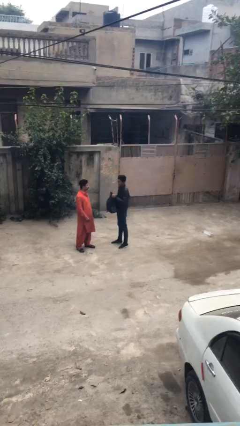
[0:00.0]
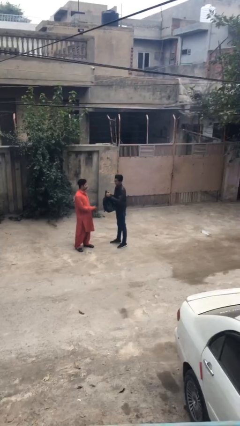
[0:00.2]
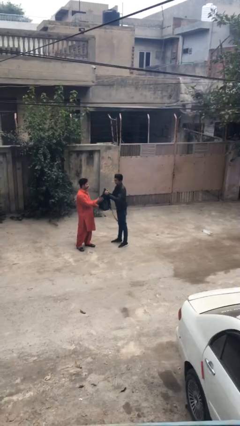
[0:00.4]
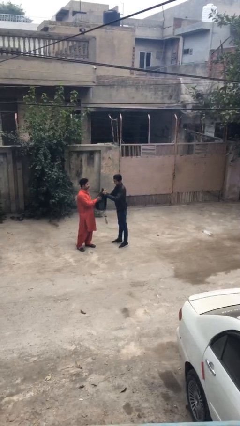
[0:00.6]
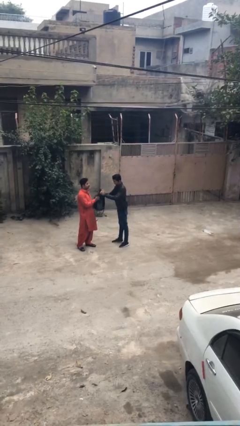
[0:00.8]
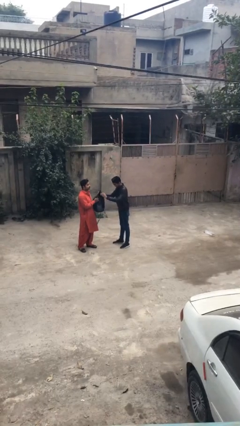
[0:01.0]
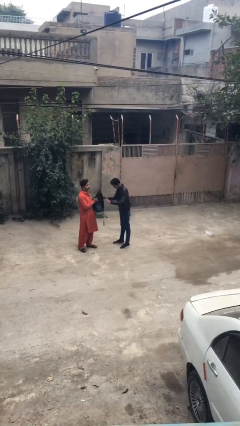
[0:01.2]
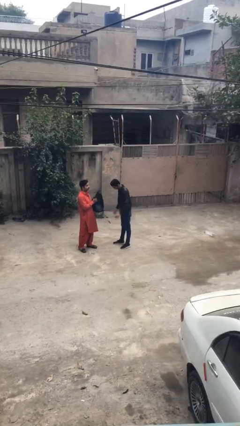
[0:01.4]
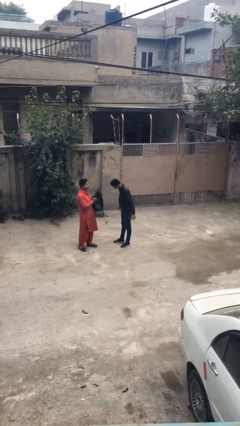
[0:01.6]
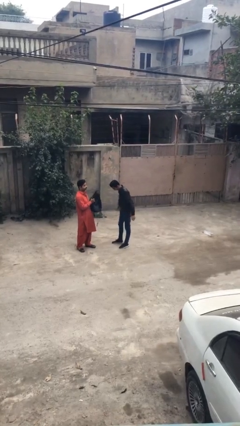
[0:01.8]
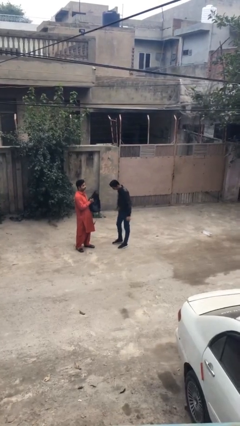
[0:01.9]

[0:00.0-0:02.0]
person transfers object to person

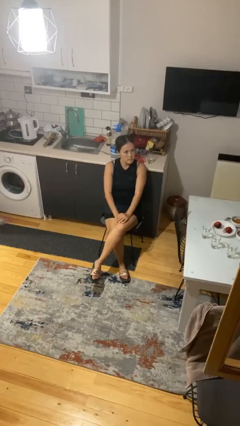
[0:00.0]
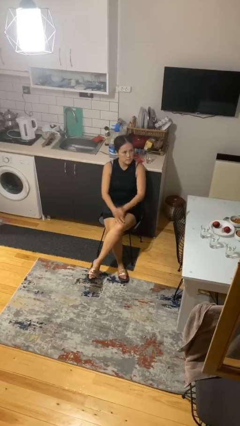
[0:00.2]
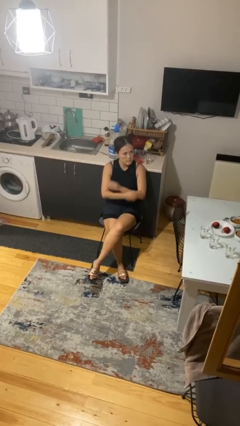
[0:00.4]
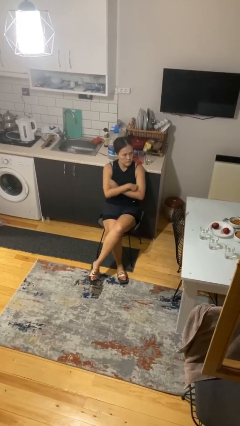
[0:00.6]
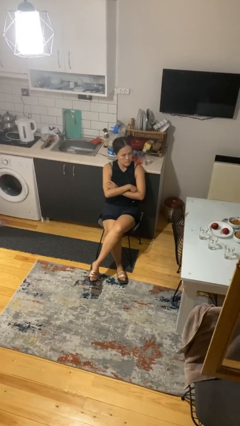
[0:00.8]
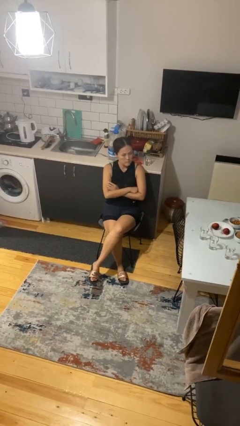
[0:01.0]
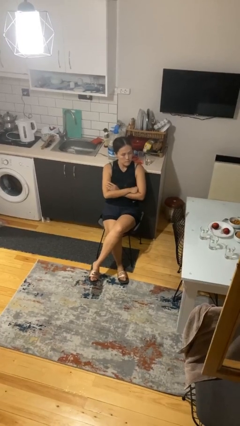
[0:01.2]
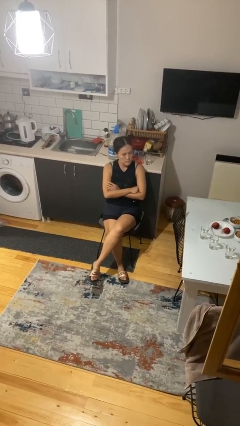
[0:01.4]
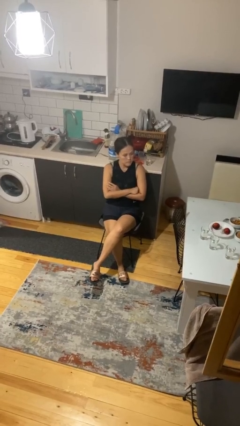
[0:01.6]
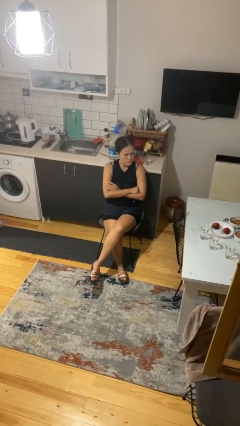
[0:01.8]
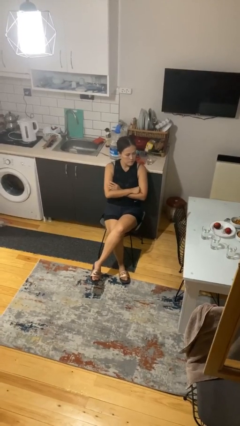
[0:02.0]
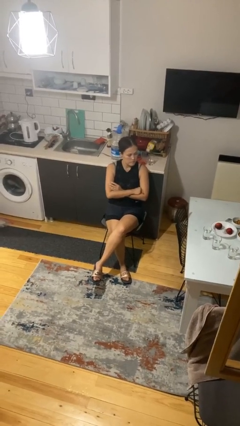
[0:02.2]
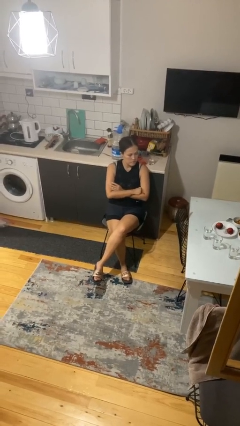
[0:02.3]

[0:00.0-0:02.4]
person crosses arms

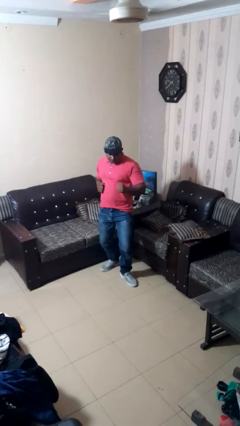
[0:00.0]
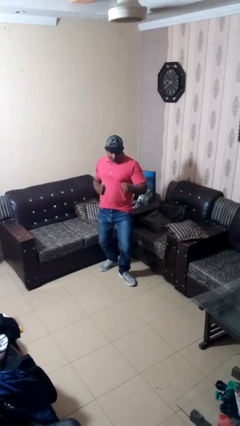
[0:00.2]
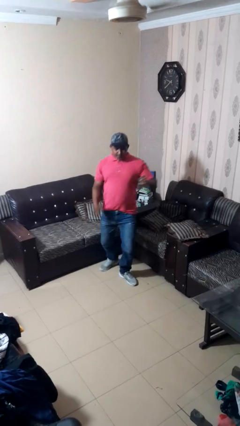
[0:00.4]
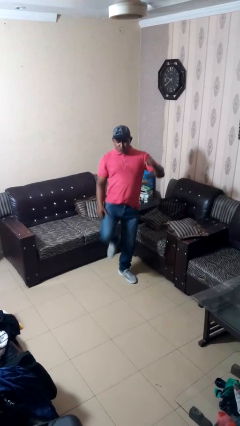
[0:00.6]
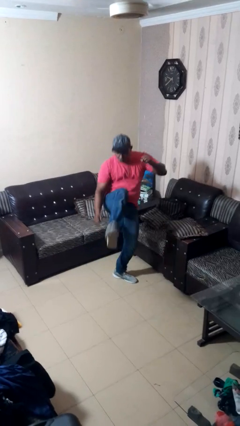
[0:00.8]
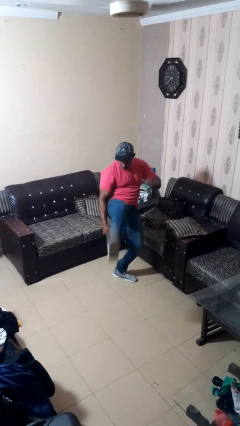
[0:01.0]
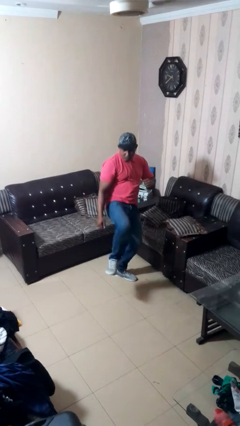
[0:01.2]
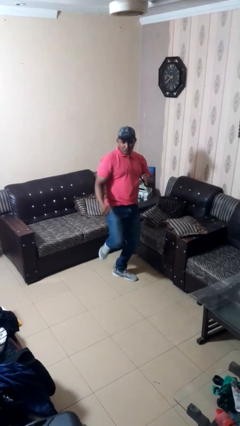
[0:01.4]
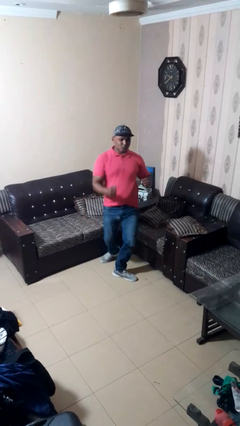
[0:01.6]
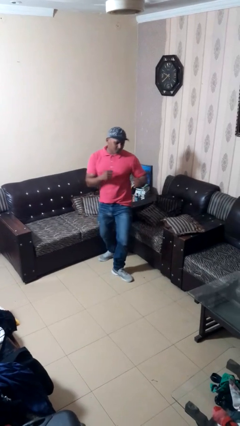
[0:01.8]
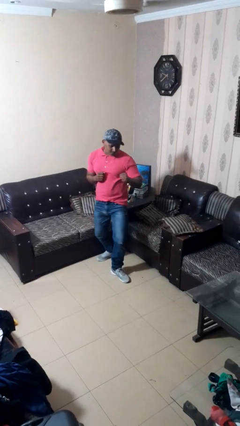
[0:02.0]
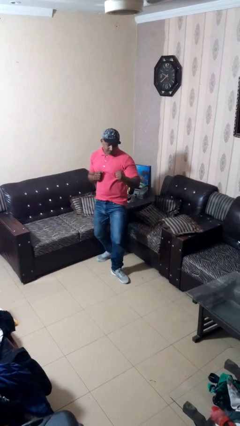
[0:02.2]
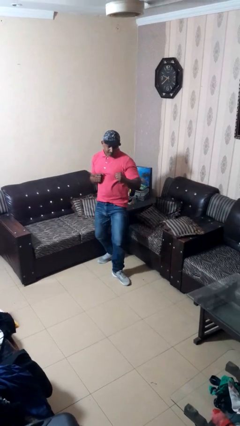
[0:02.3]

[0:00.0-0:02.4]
person karate kicks

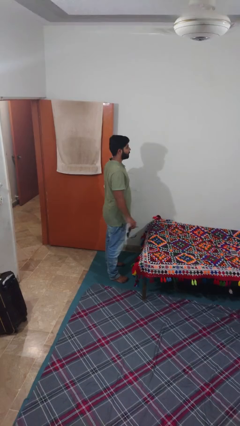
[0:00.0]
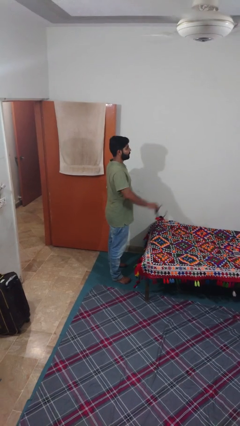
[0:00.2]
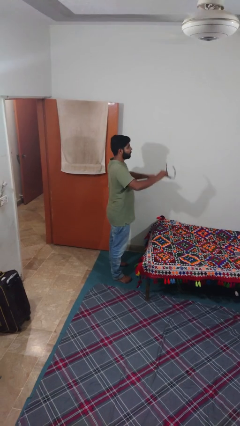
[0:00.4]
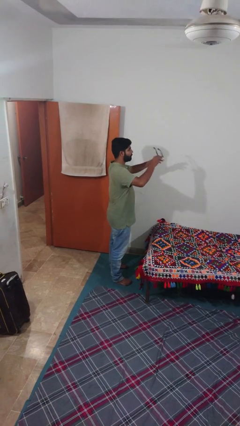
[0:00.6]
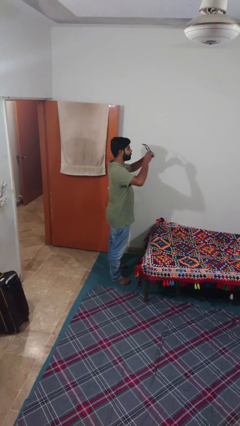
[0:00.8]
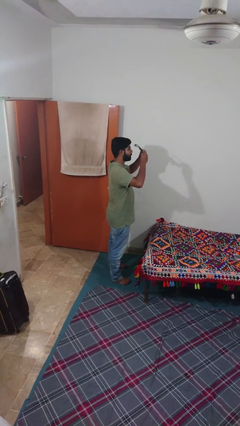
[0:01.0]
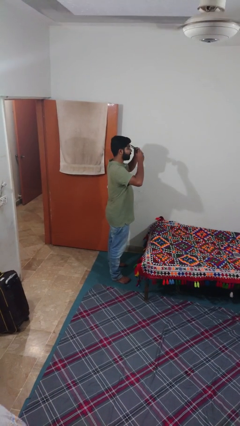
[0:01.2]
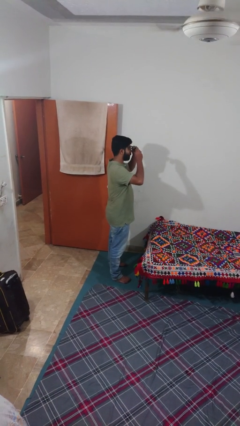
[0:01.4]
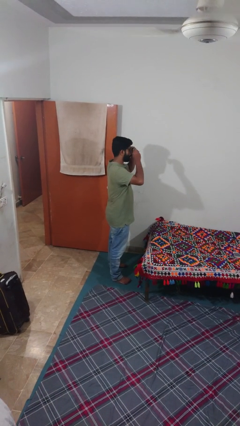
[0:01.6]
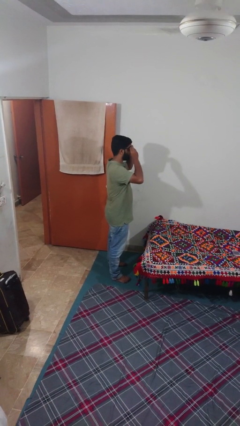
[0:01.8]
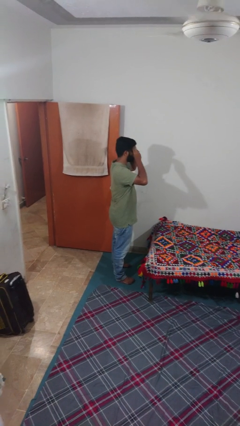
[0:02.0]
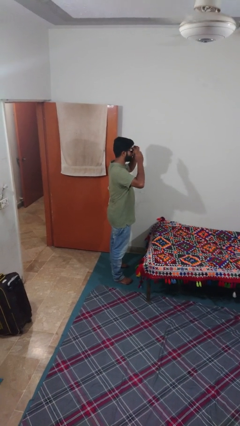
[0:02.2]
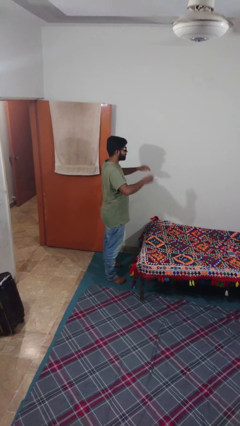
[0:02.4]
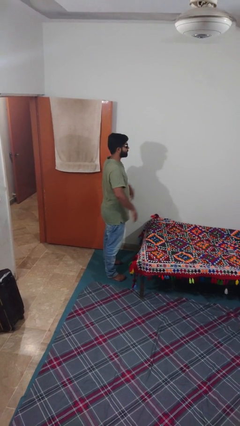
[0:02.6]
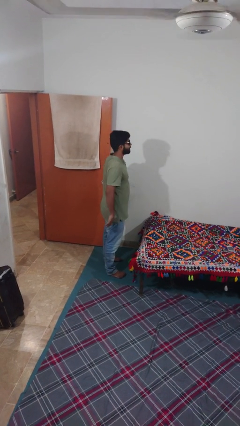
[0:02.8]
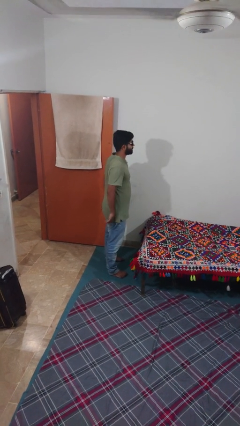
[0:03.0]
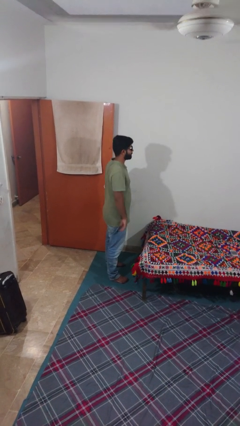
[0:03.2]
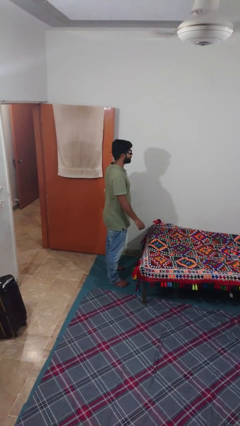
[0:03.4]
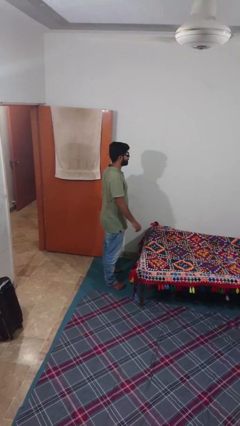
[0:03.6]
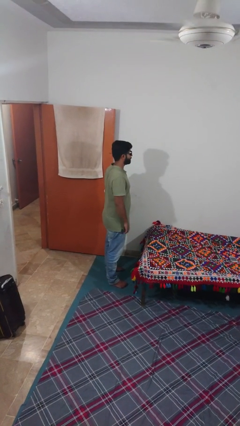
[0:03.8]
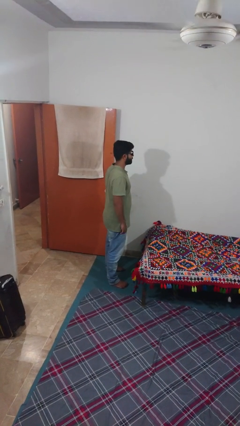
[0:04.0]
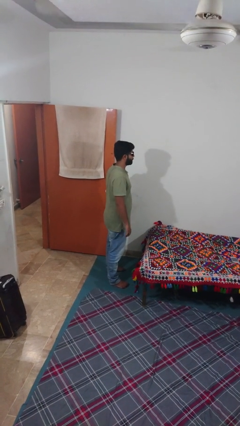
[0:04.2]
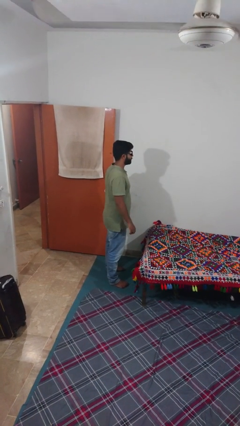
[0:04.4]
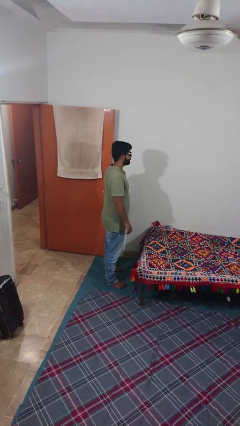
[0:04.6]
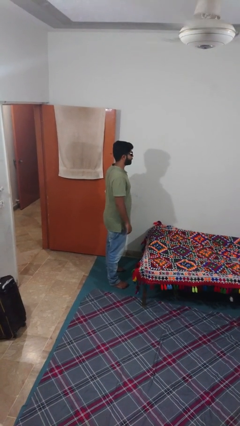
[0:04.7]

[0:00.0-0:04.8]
person puts on sunglasses

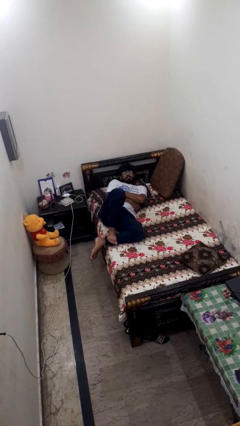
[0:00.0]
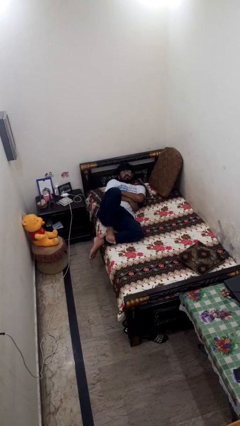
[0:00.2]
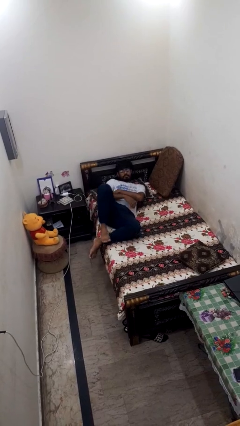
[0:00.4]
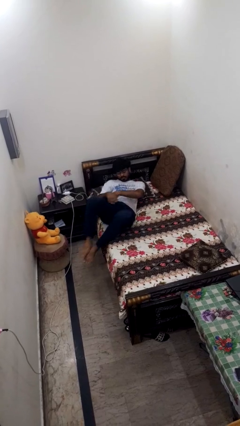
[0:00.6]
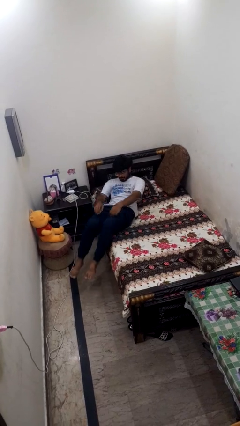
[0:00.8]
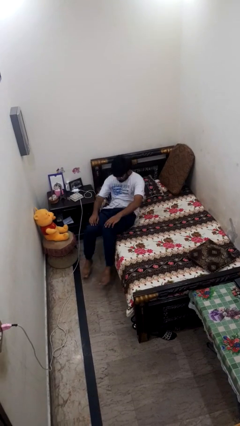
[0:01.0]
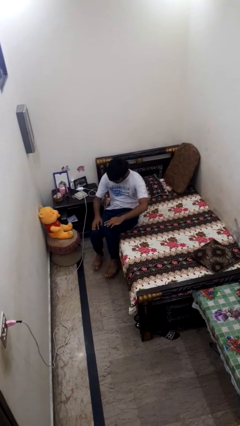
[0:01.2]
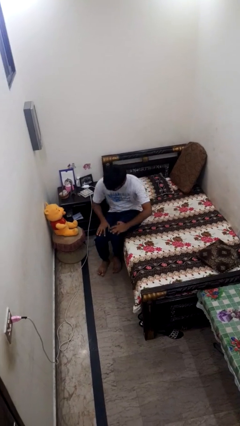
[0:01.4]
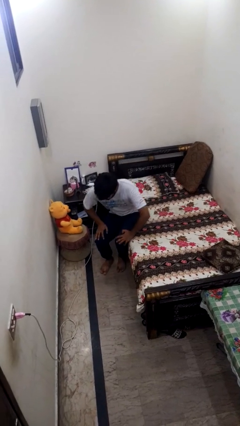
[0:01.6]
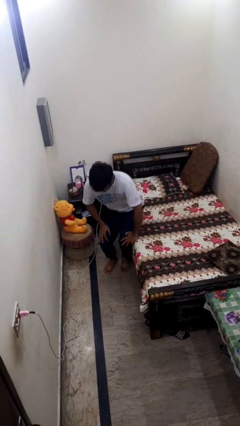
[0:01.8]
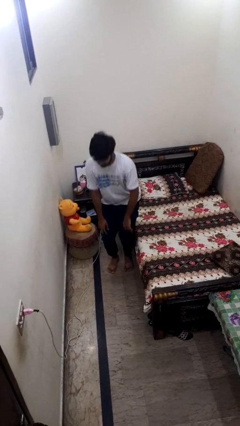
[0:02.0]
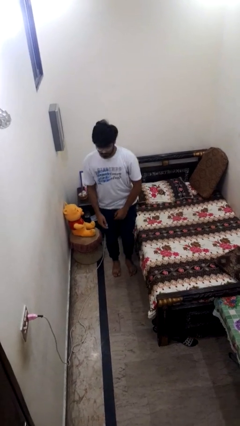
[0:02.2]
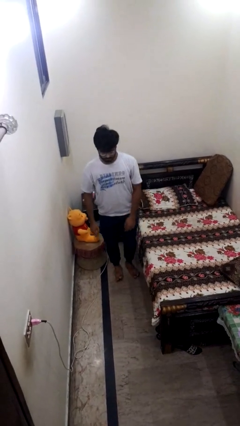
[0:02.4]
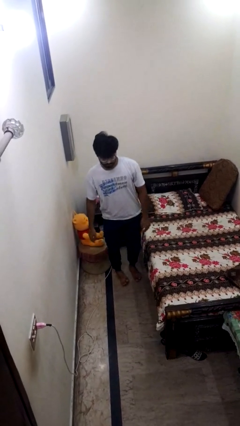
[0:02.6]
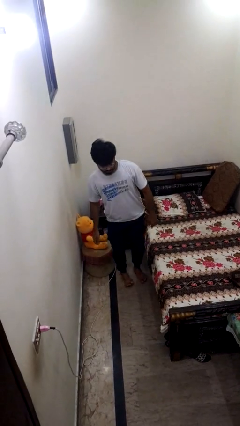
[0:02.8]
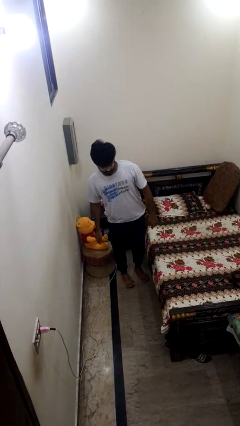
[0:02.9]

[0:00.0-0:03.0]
person stands up

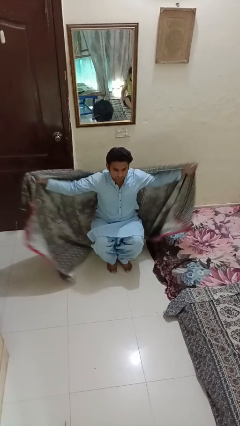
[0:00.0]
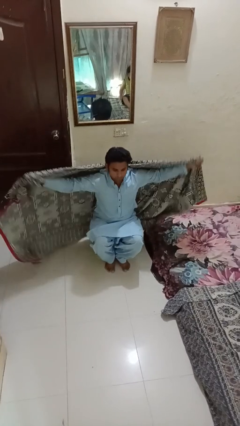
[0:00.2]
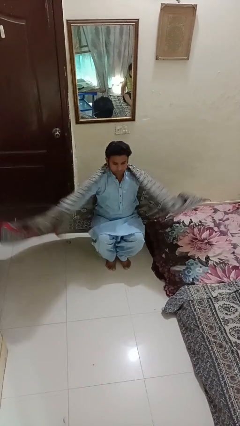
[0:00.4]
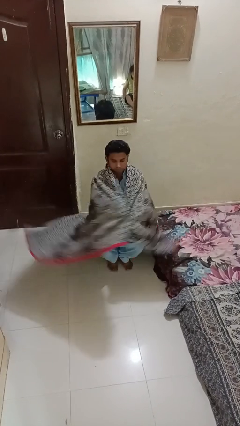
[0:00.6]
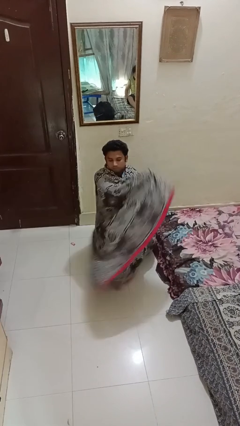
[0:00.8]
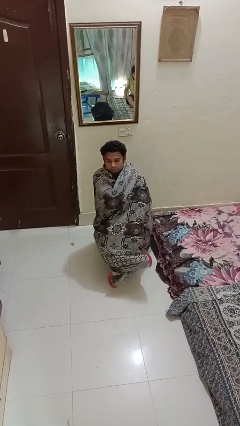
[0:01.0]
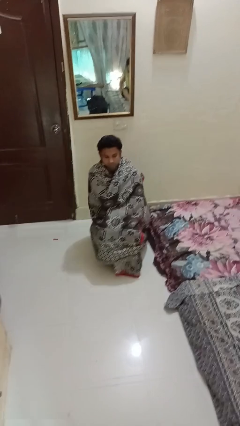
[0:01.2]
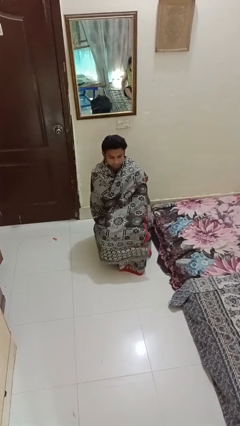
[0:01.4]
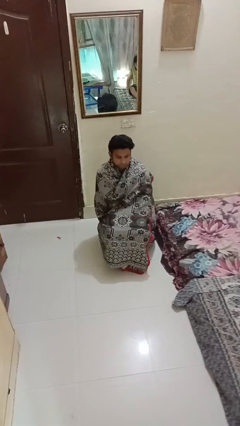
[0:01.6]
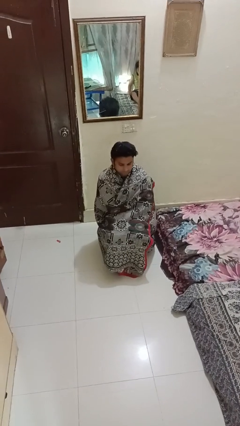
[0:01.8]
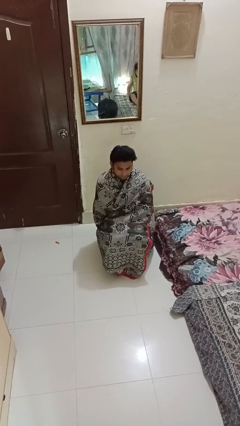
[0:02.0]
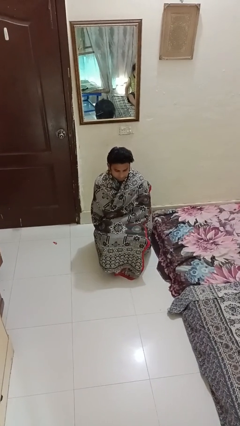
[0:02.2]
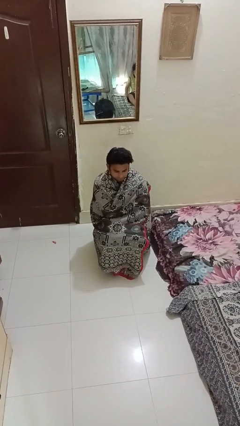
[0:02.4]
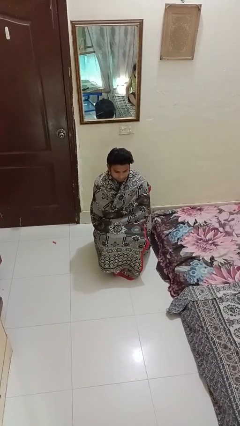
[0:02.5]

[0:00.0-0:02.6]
person covers with blanket
